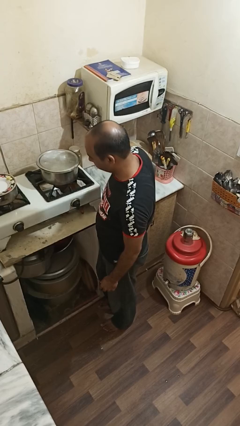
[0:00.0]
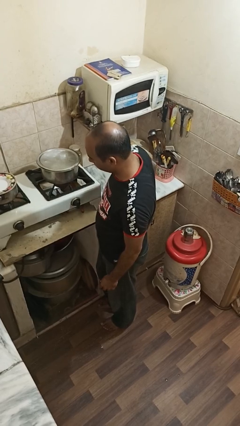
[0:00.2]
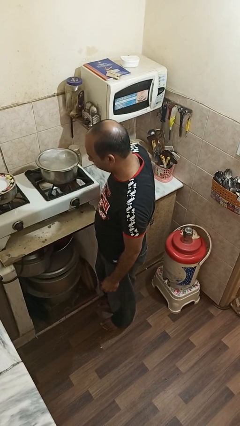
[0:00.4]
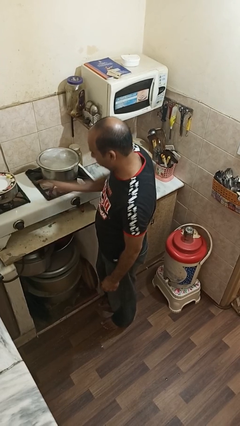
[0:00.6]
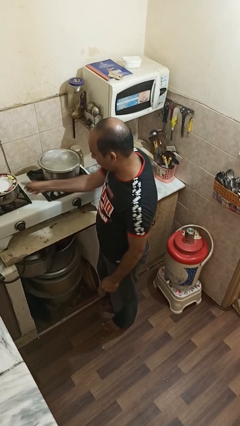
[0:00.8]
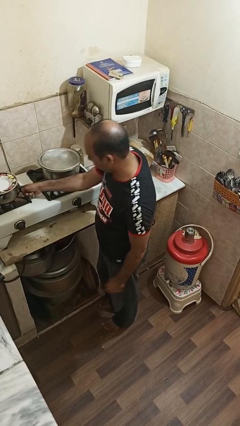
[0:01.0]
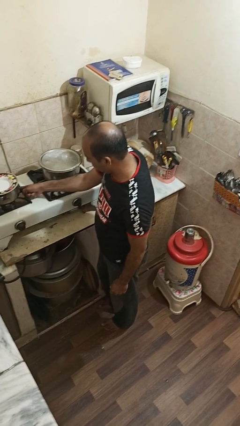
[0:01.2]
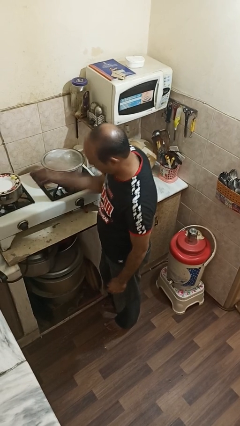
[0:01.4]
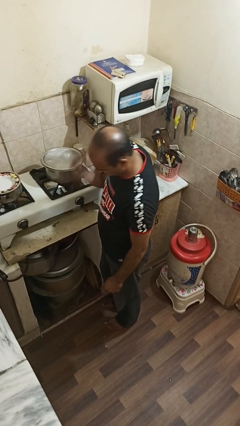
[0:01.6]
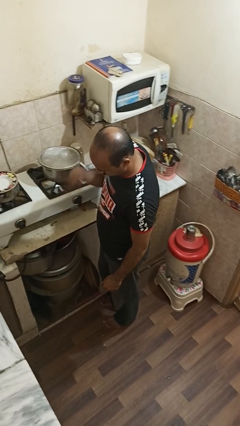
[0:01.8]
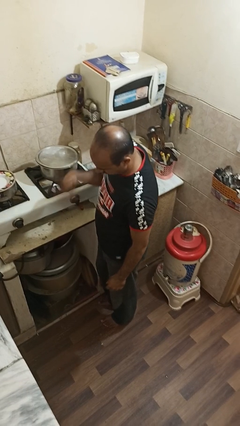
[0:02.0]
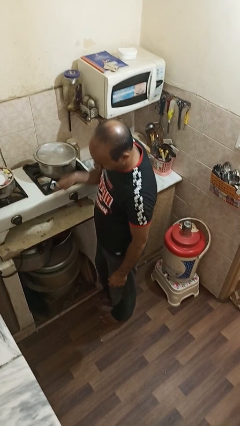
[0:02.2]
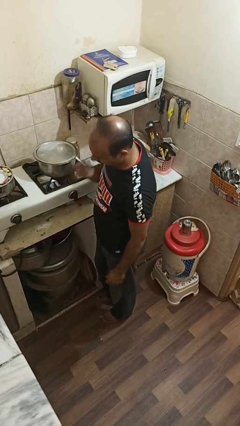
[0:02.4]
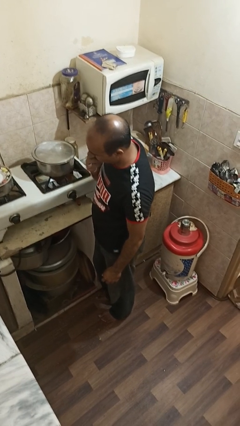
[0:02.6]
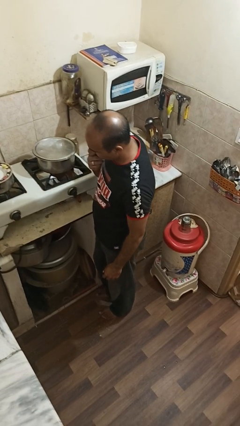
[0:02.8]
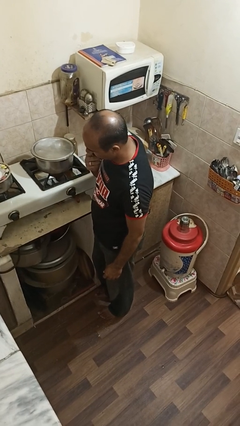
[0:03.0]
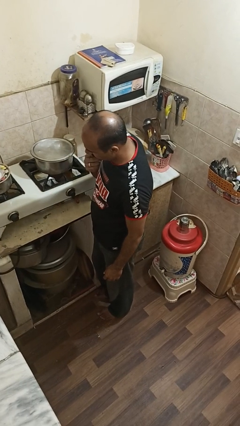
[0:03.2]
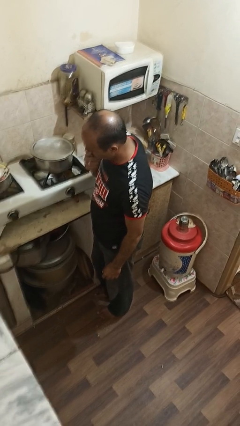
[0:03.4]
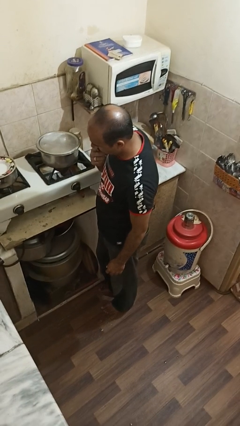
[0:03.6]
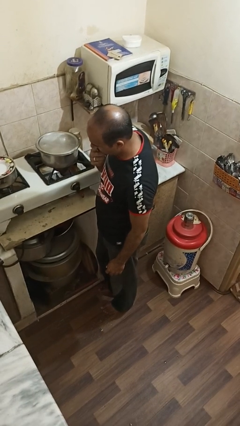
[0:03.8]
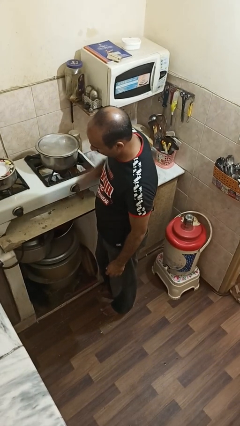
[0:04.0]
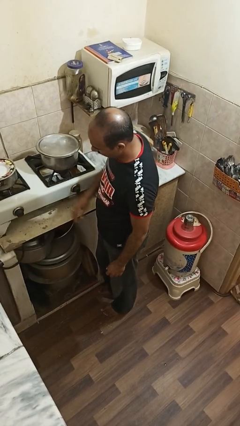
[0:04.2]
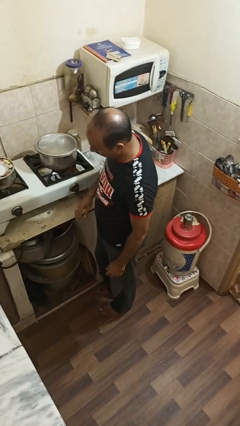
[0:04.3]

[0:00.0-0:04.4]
person burns hand

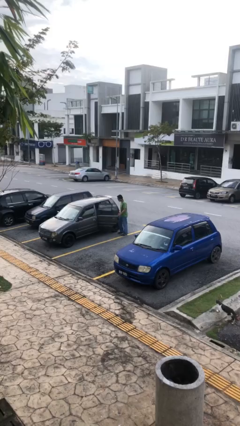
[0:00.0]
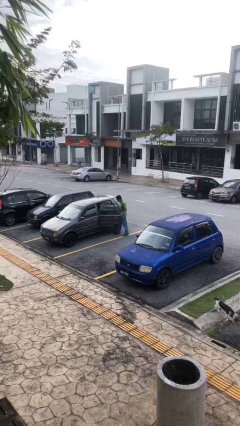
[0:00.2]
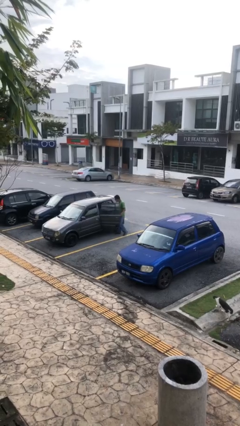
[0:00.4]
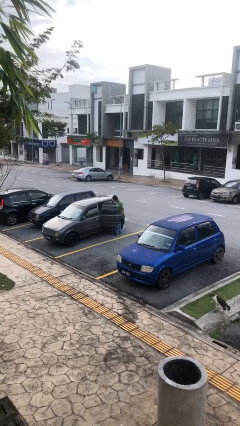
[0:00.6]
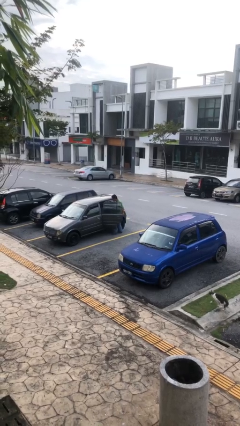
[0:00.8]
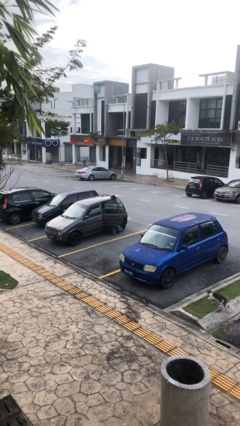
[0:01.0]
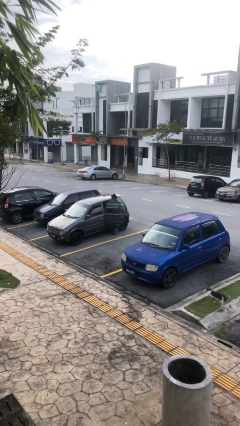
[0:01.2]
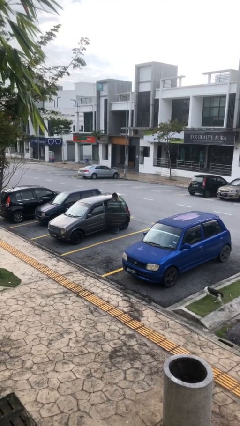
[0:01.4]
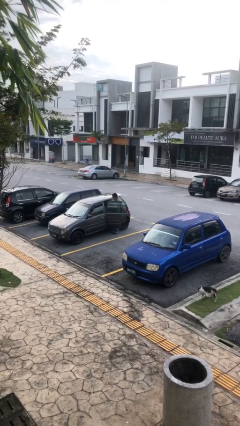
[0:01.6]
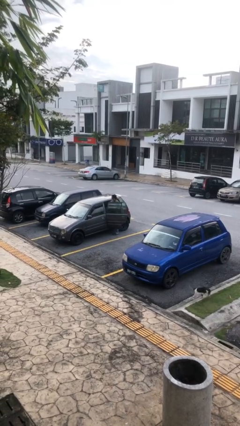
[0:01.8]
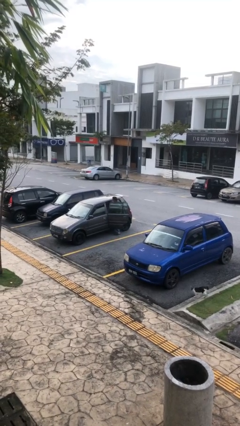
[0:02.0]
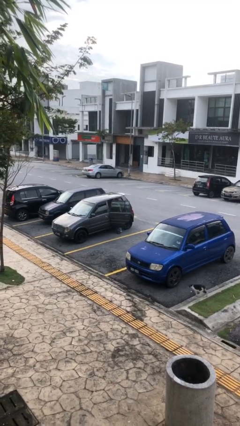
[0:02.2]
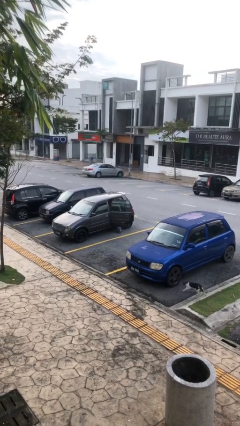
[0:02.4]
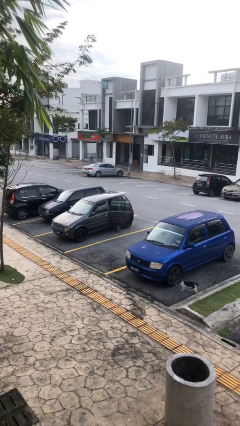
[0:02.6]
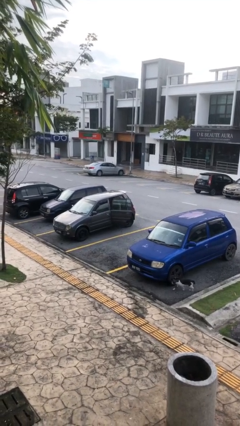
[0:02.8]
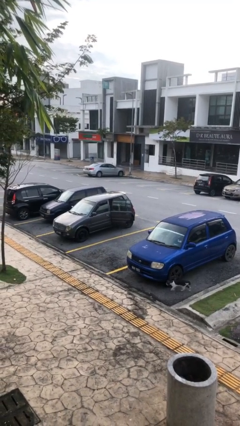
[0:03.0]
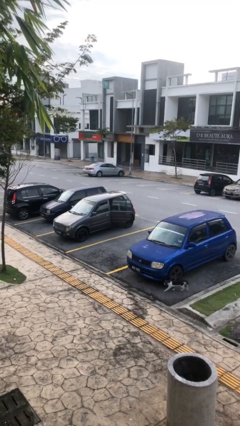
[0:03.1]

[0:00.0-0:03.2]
person enters car

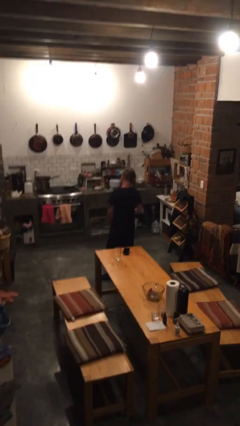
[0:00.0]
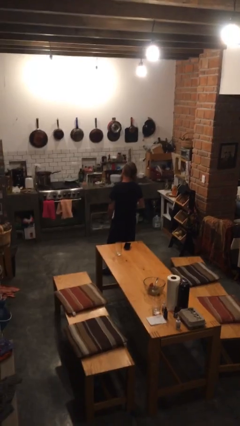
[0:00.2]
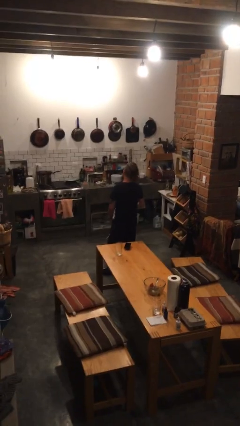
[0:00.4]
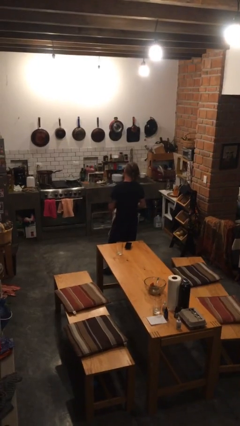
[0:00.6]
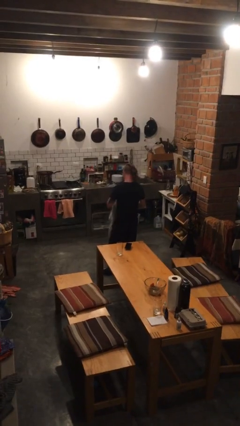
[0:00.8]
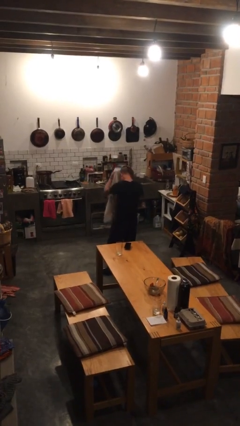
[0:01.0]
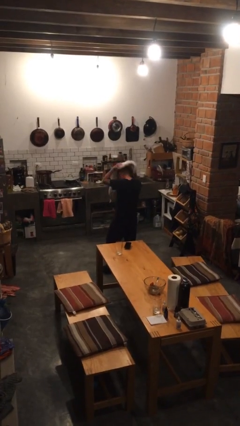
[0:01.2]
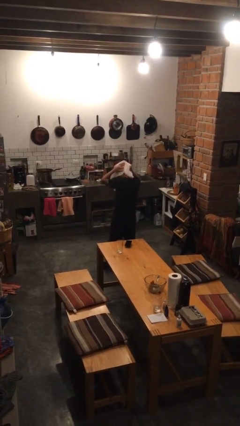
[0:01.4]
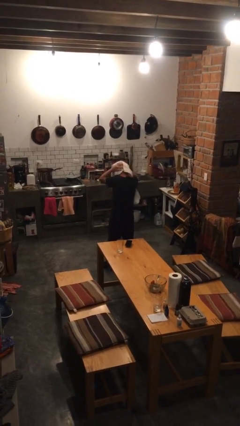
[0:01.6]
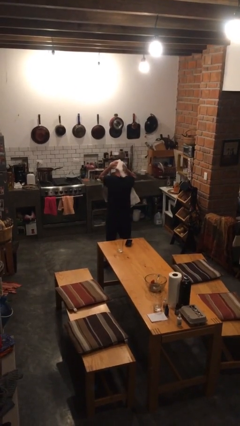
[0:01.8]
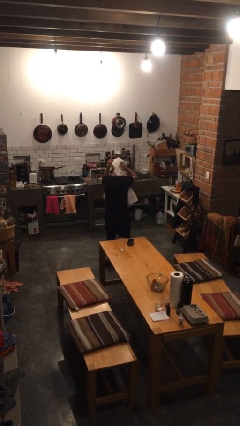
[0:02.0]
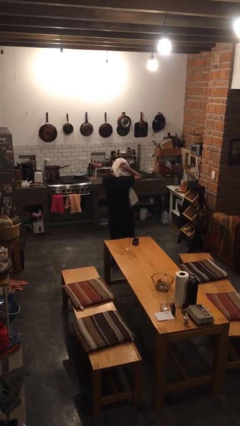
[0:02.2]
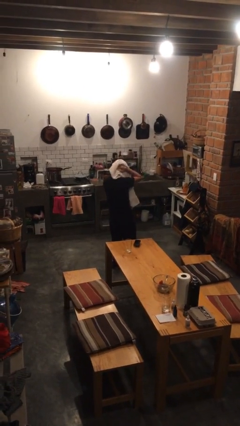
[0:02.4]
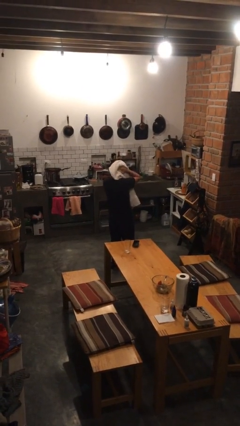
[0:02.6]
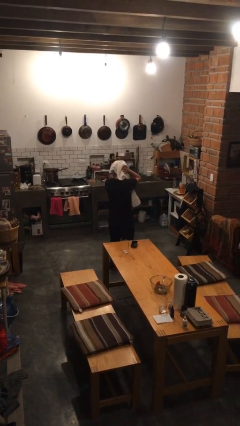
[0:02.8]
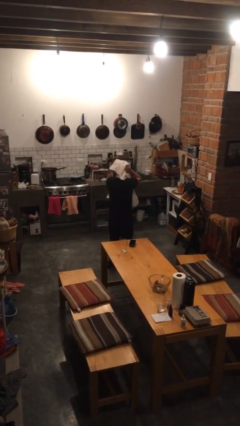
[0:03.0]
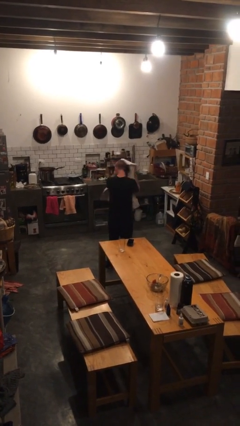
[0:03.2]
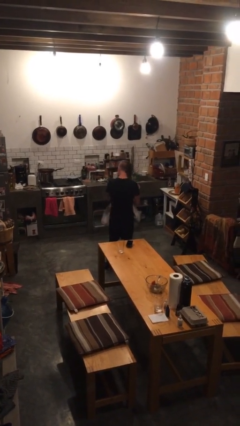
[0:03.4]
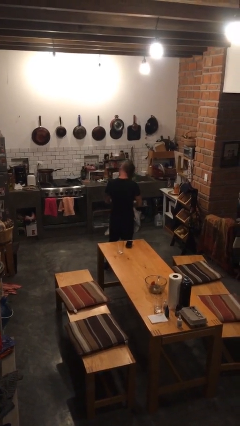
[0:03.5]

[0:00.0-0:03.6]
person dries hair with towel

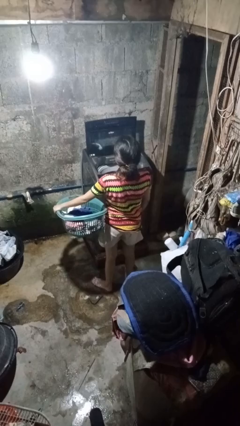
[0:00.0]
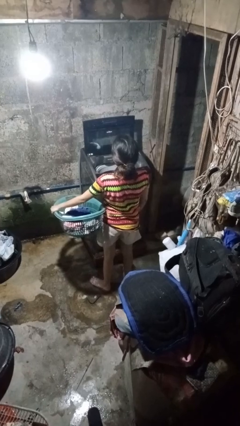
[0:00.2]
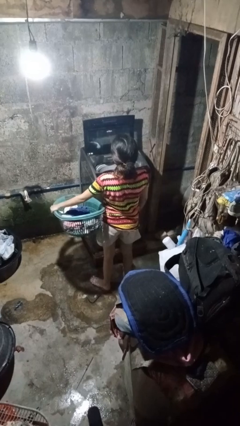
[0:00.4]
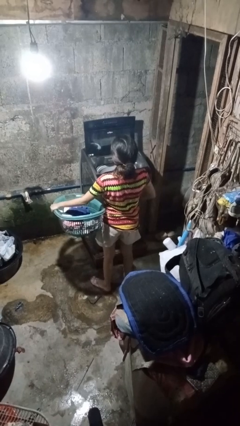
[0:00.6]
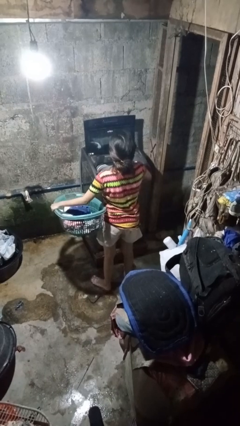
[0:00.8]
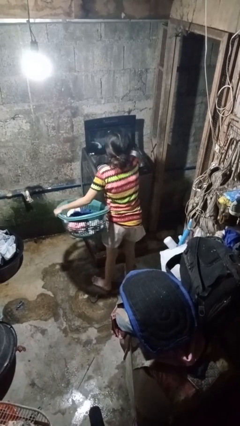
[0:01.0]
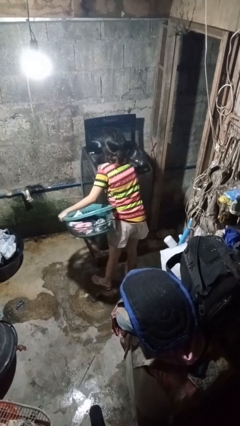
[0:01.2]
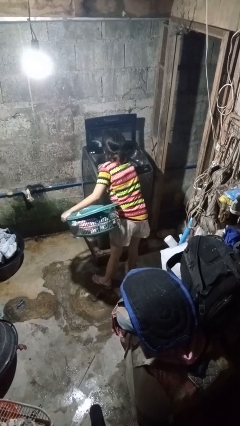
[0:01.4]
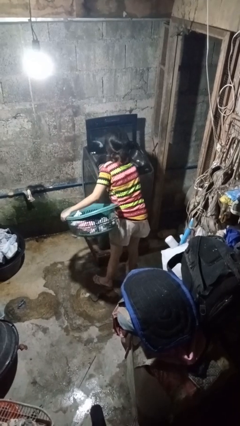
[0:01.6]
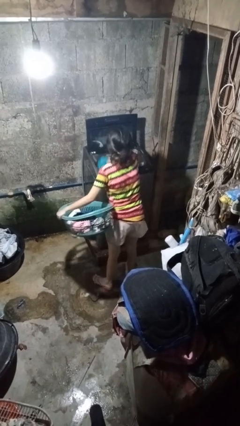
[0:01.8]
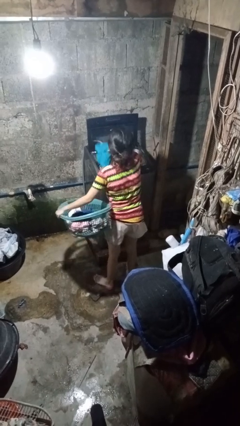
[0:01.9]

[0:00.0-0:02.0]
person unloads clotheswasher

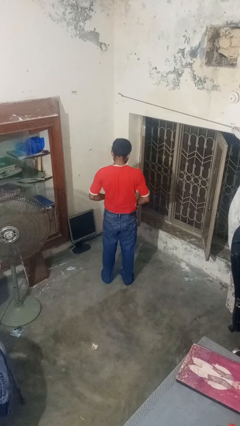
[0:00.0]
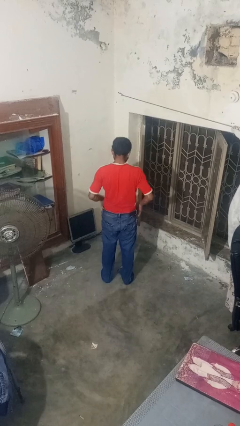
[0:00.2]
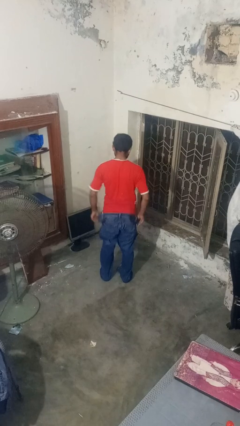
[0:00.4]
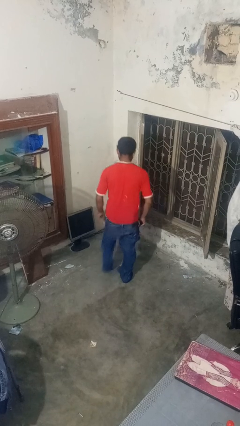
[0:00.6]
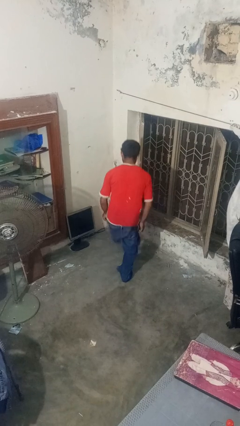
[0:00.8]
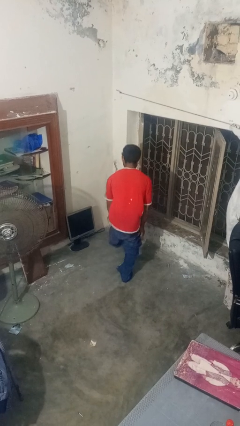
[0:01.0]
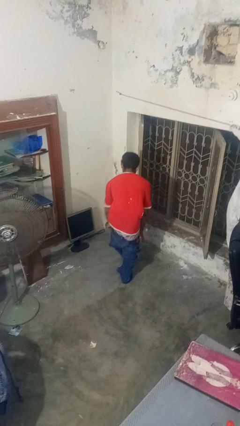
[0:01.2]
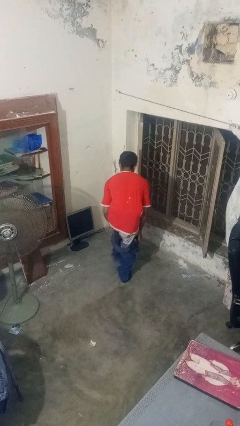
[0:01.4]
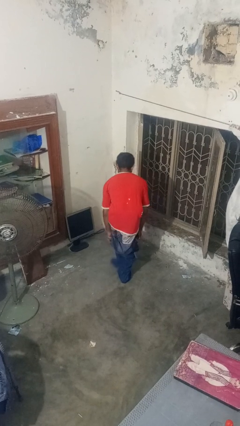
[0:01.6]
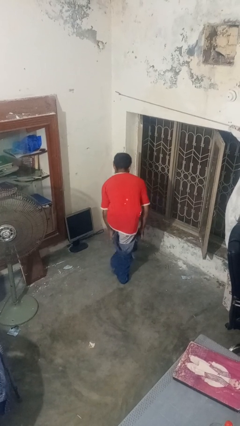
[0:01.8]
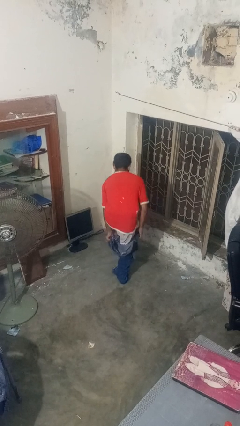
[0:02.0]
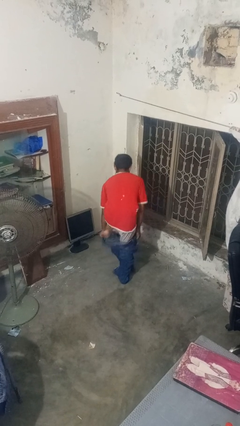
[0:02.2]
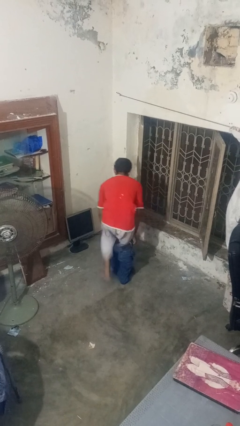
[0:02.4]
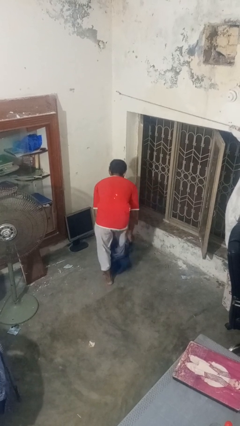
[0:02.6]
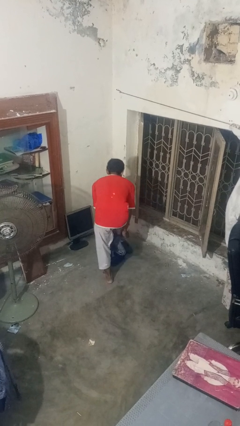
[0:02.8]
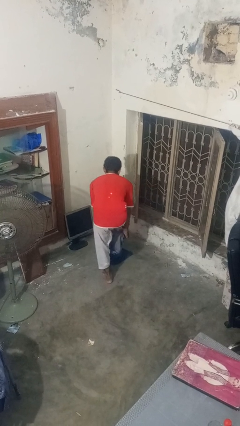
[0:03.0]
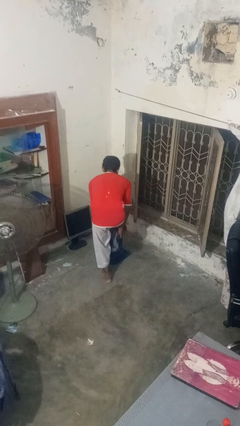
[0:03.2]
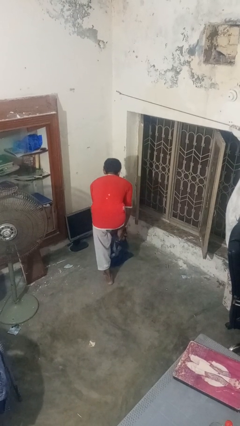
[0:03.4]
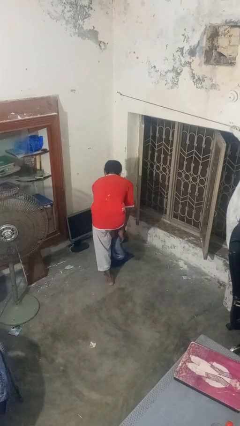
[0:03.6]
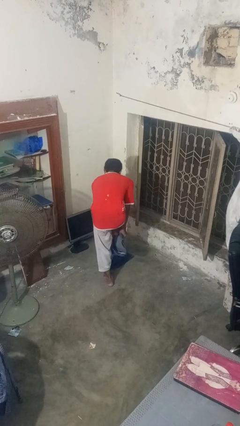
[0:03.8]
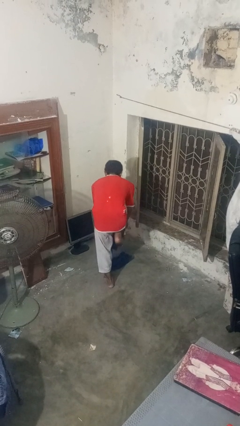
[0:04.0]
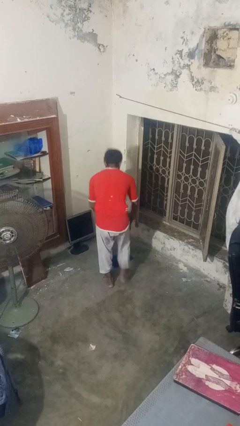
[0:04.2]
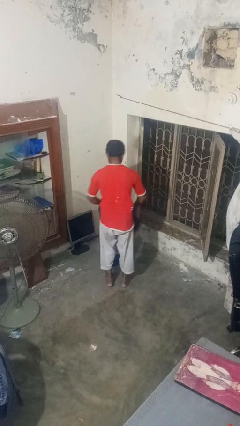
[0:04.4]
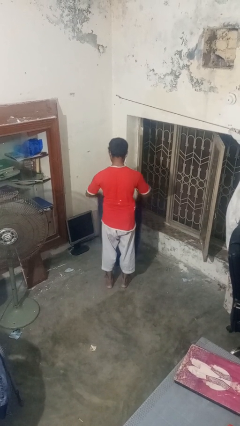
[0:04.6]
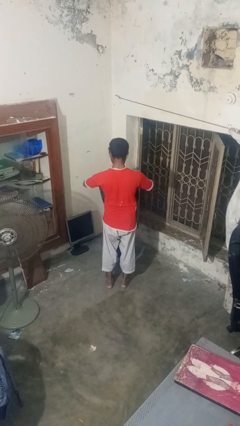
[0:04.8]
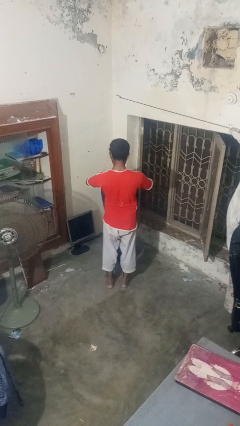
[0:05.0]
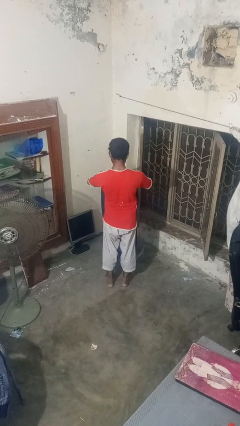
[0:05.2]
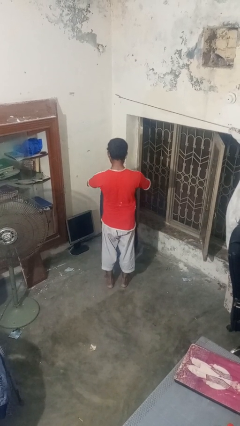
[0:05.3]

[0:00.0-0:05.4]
person takes off pants
